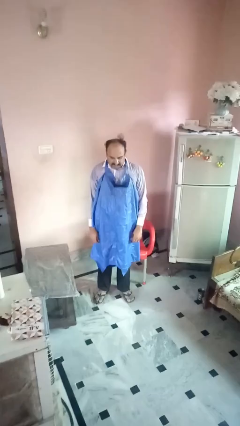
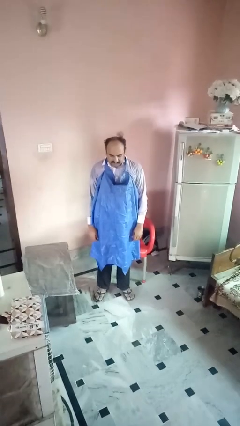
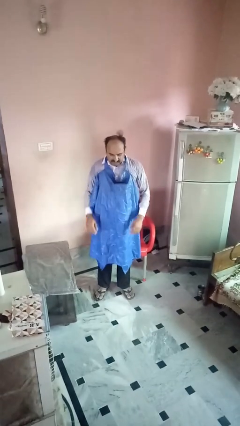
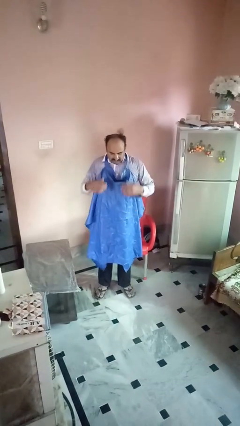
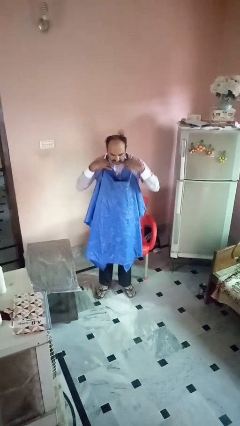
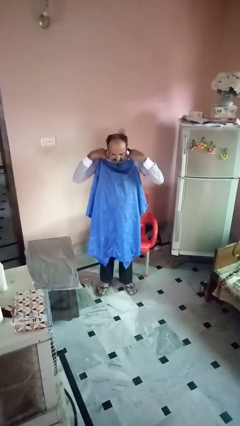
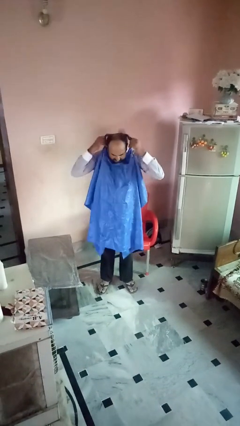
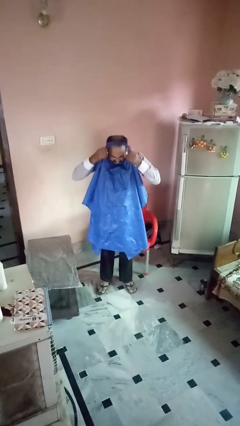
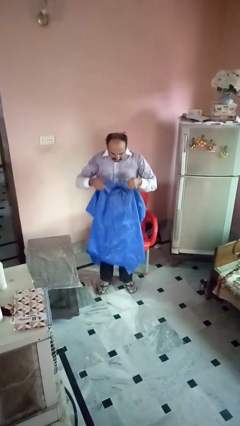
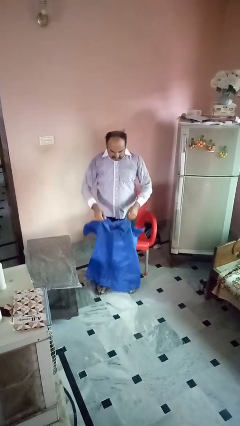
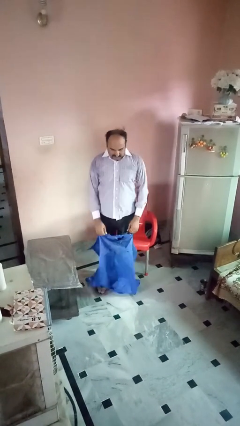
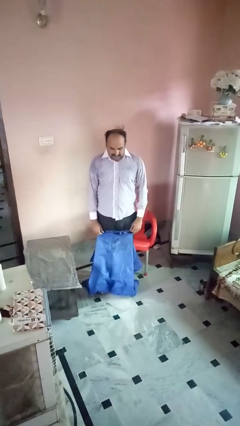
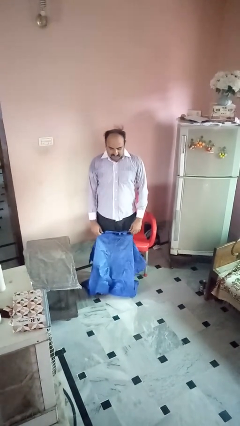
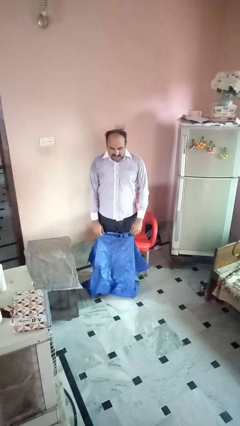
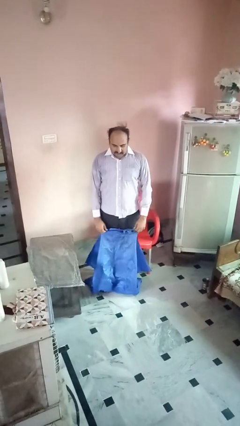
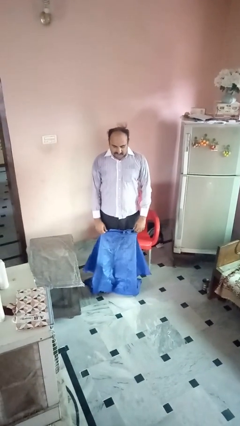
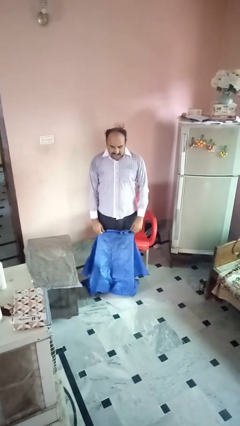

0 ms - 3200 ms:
person takes off apron

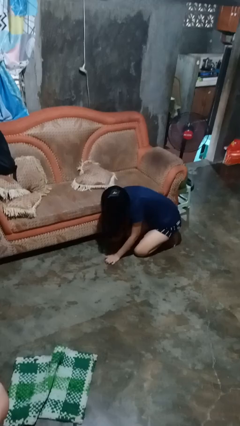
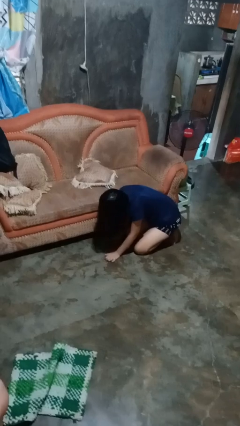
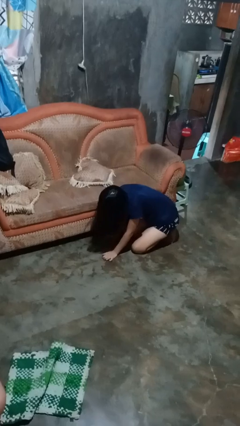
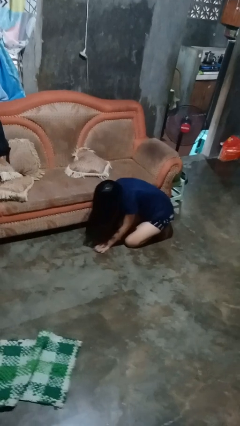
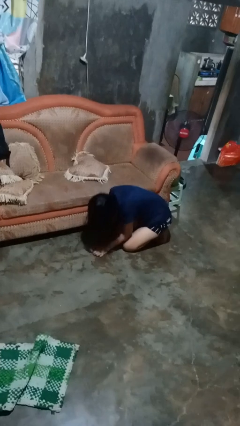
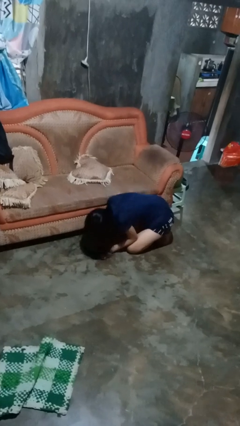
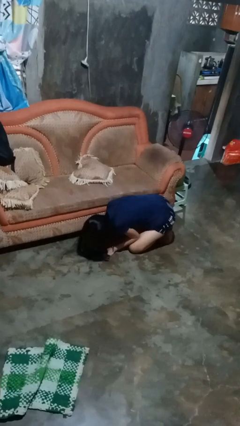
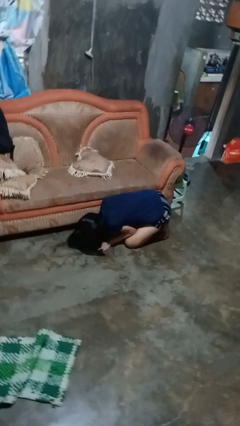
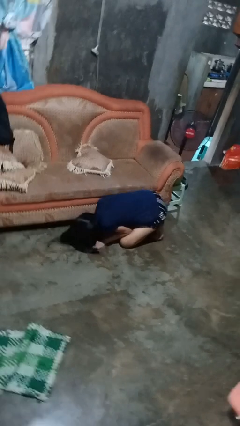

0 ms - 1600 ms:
person searches under couch

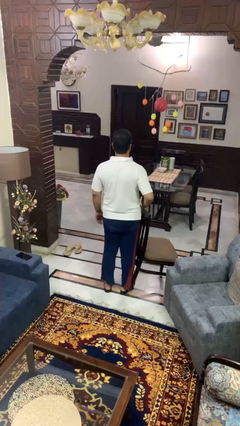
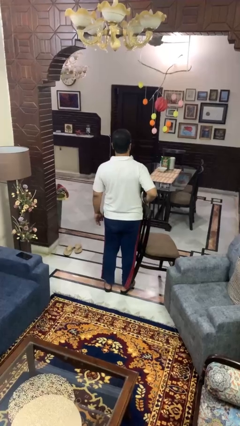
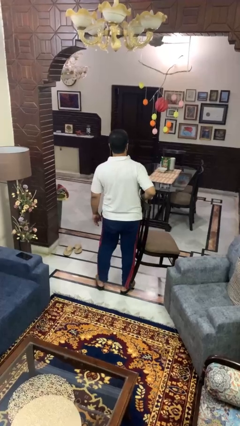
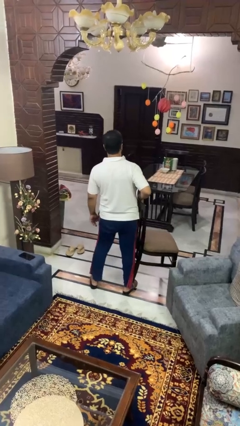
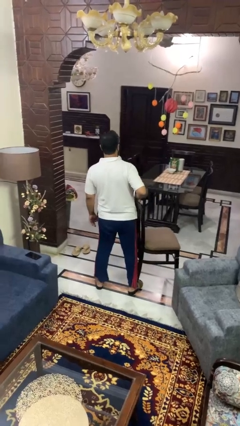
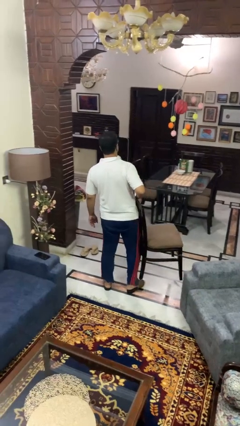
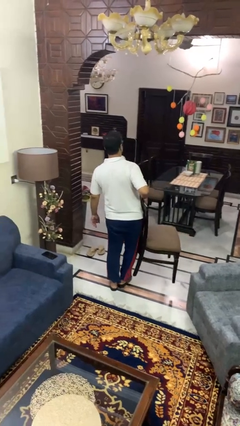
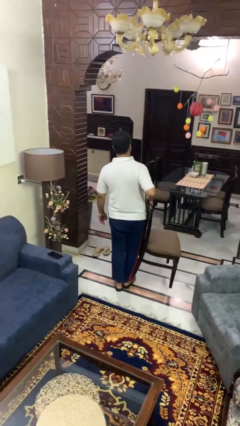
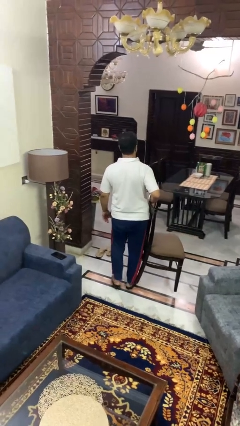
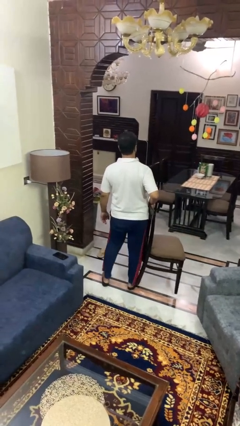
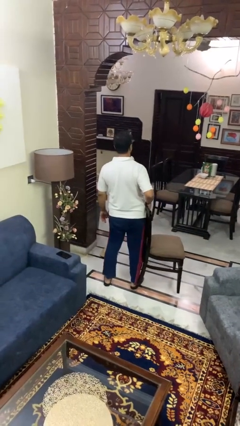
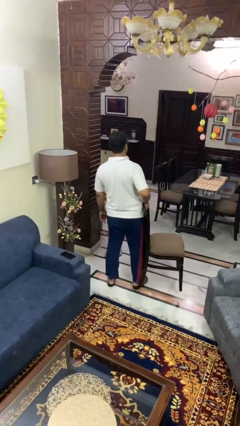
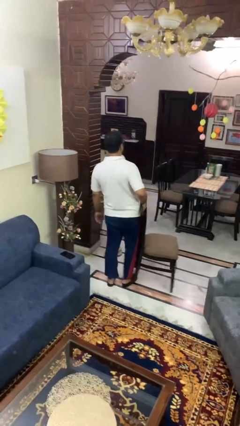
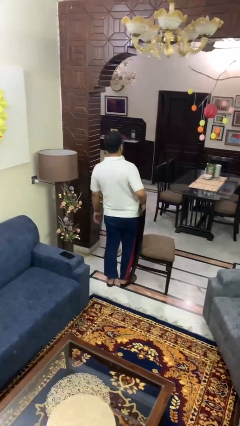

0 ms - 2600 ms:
person carries furniture

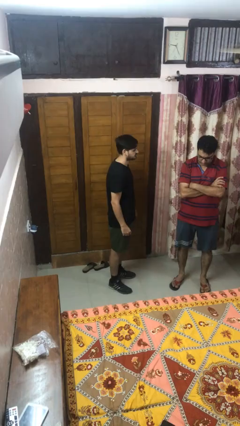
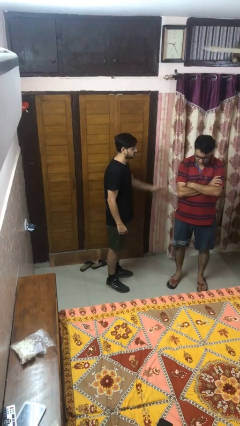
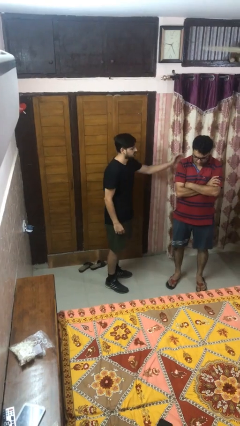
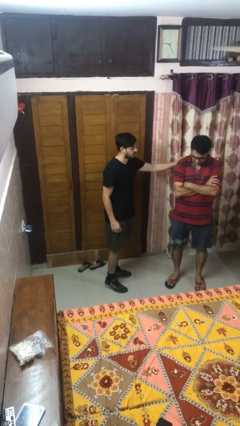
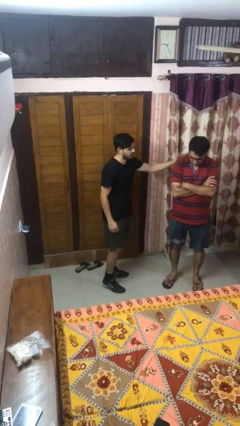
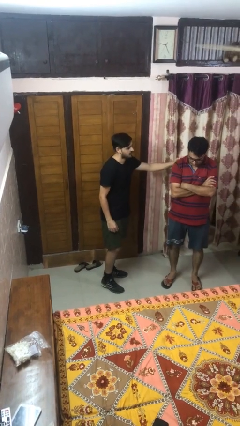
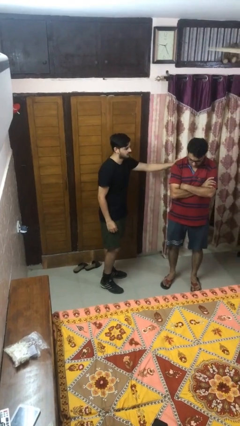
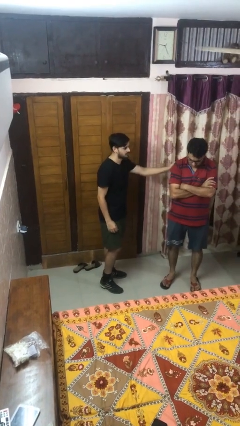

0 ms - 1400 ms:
person pounds shoulders of person

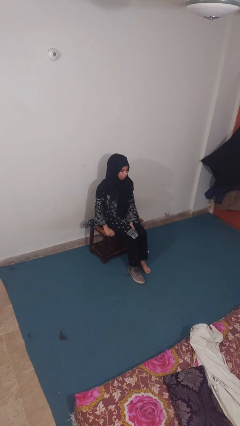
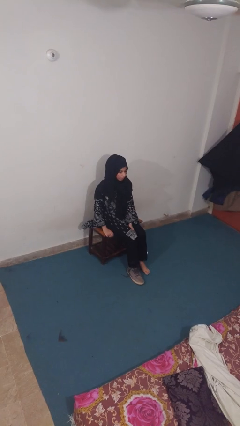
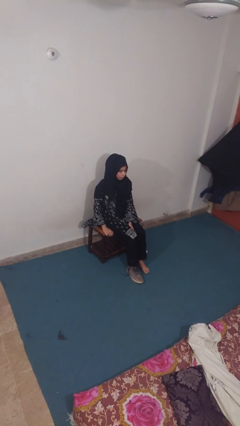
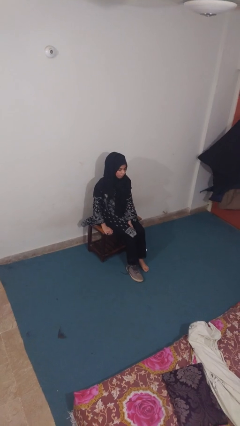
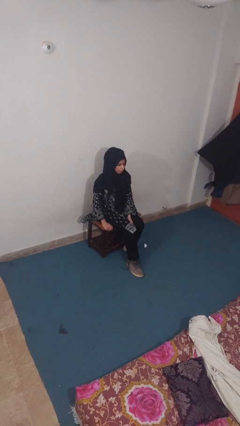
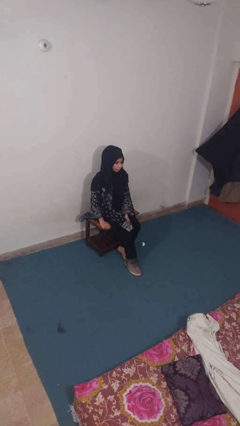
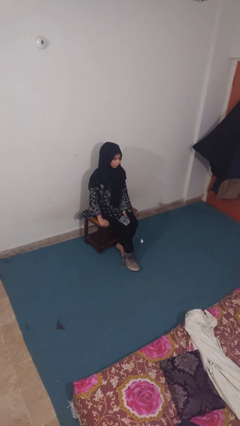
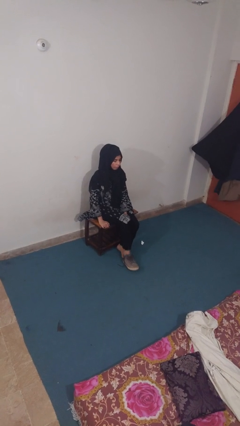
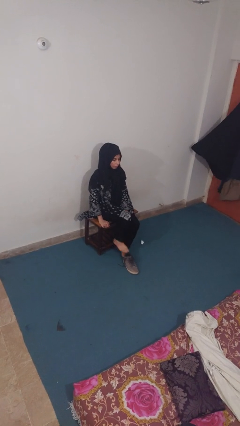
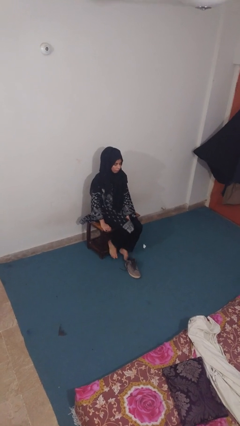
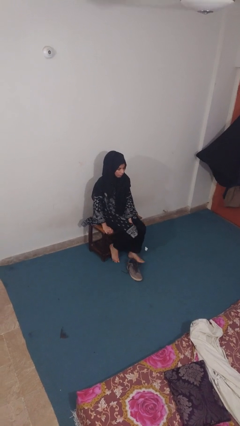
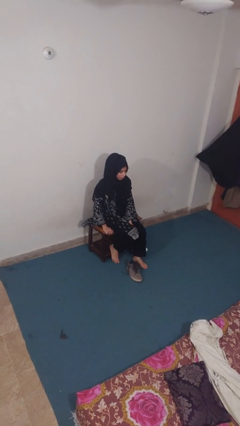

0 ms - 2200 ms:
person takes off boots

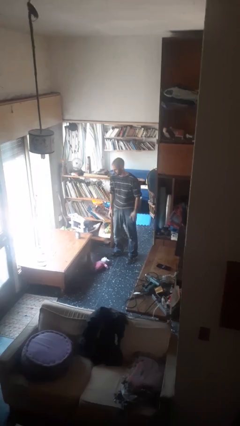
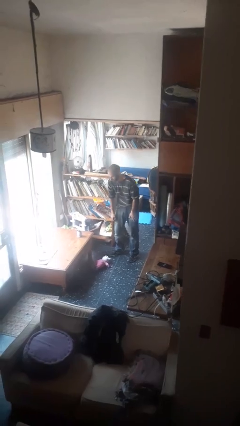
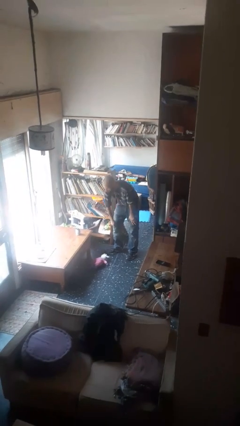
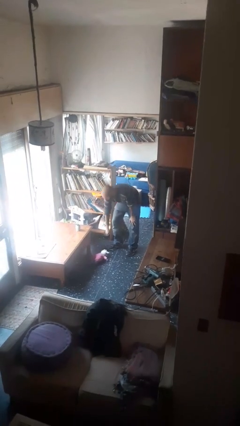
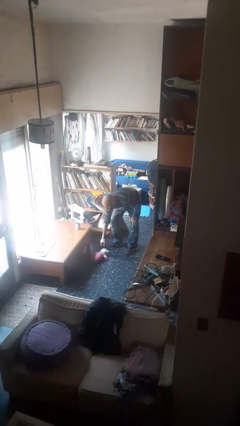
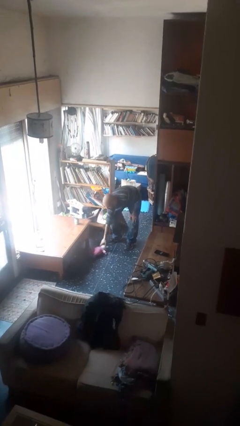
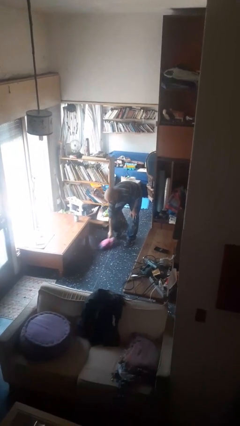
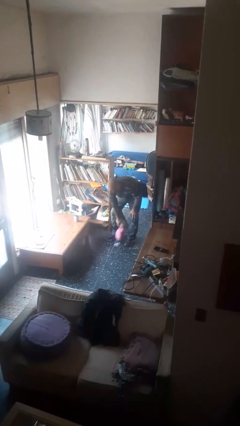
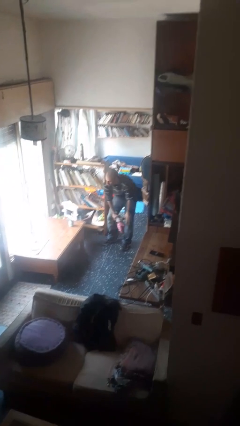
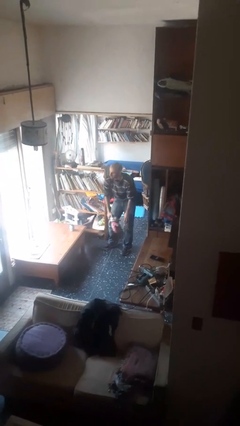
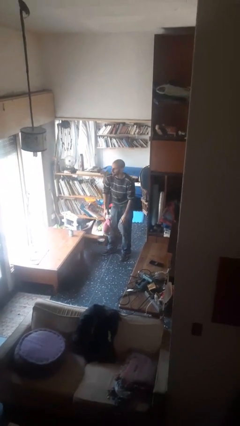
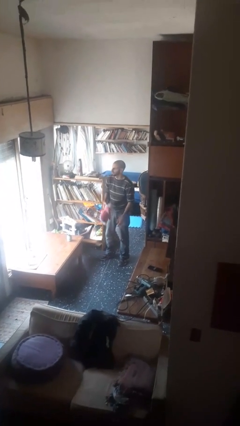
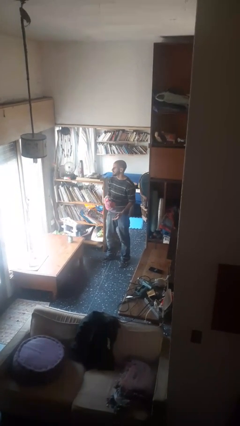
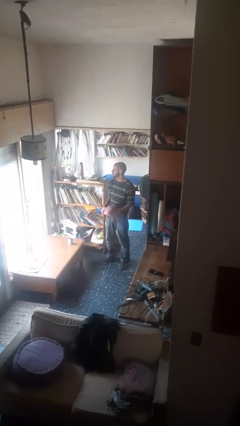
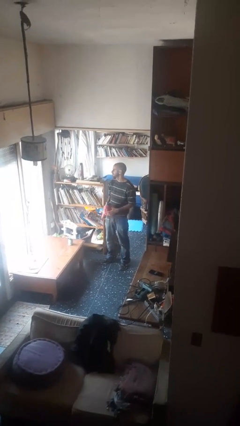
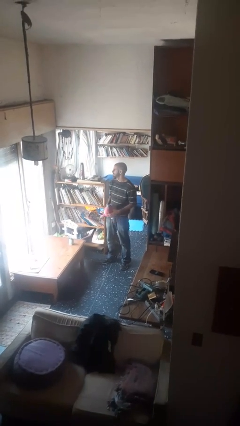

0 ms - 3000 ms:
person picks up object from floor

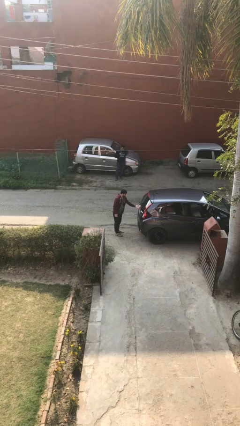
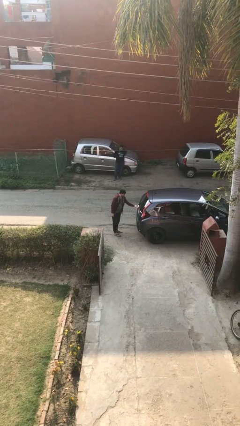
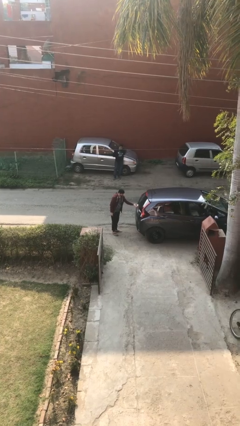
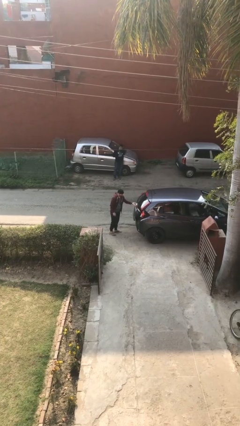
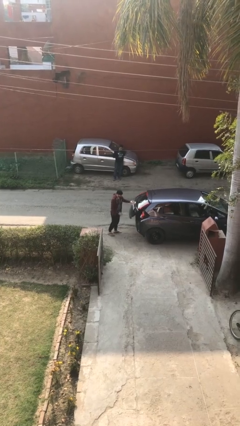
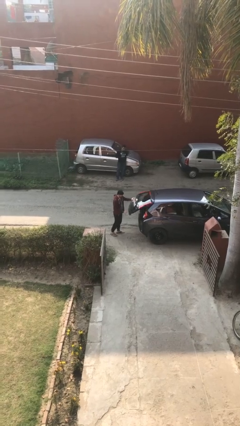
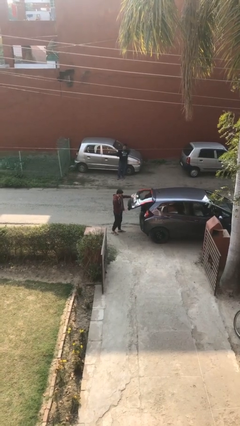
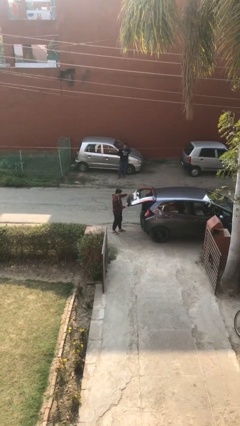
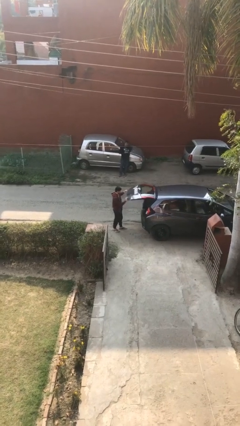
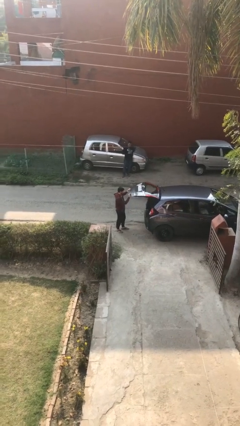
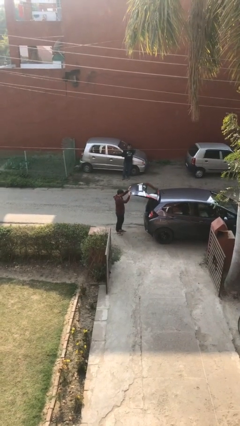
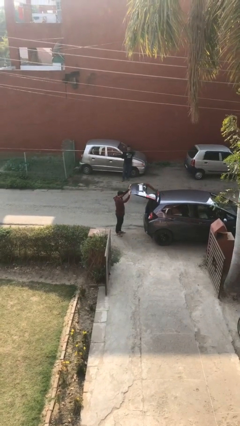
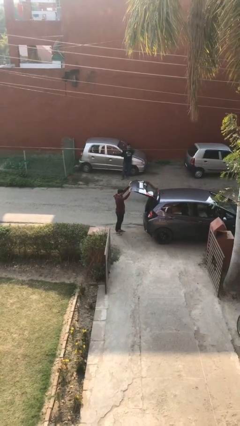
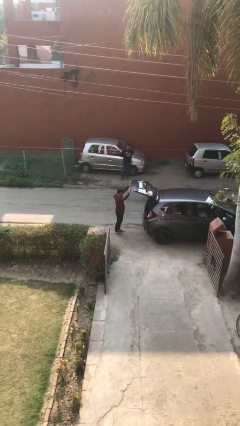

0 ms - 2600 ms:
person opens car trunk

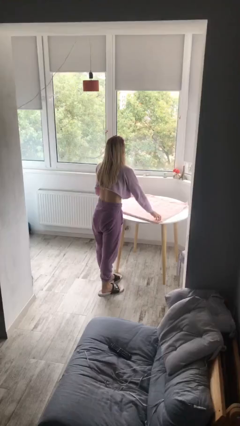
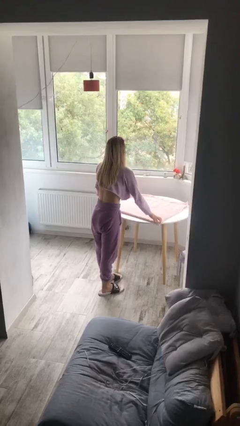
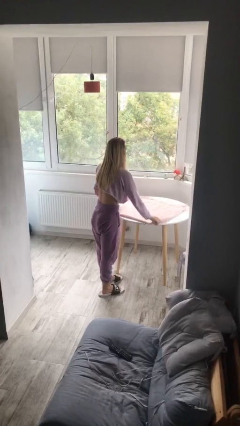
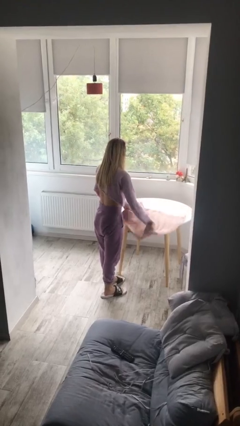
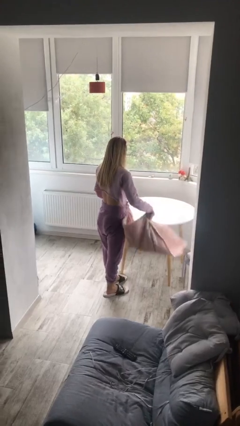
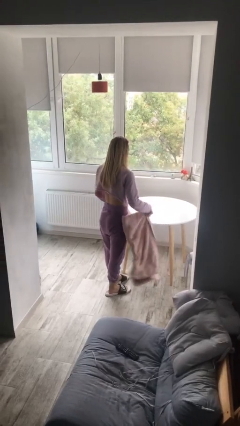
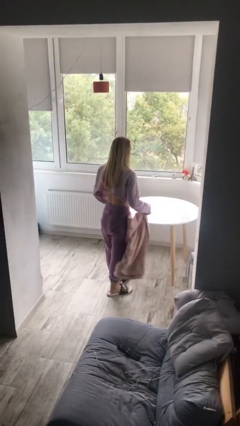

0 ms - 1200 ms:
person folds tablecloth
